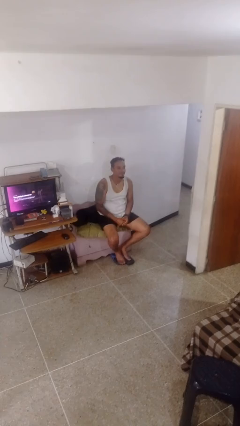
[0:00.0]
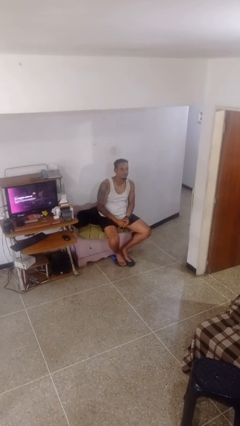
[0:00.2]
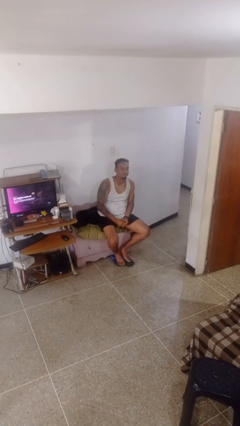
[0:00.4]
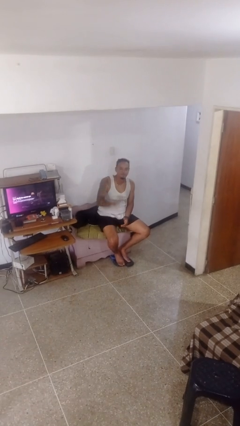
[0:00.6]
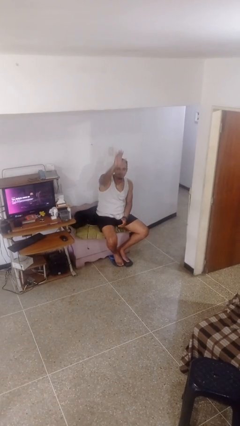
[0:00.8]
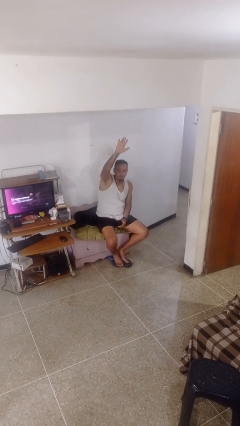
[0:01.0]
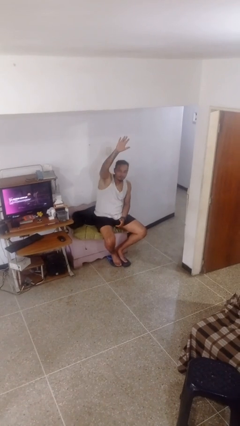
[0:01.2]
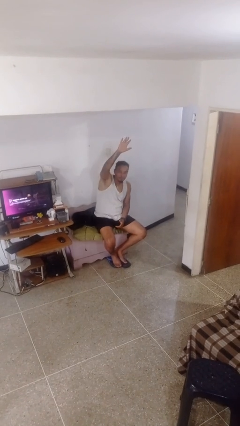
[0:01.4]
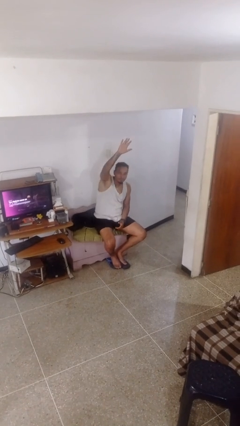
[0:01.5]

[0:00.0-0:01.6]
person gestures raise hand

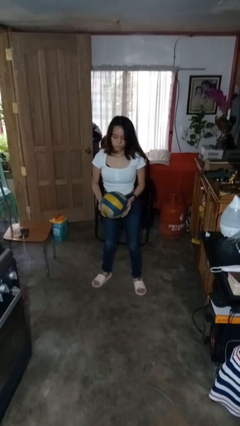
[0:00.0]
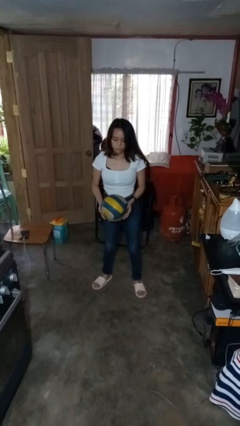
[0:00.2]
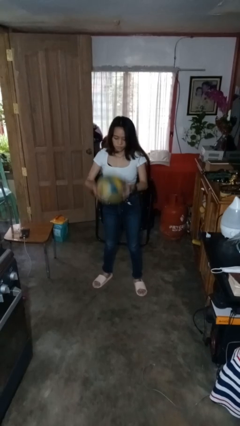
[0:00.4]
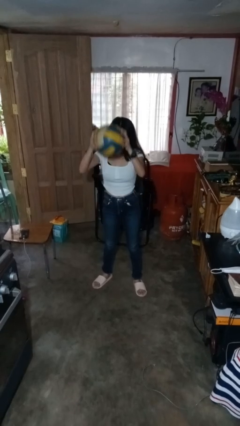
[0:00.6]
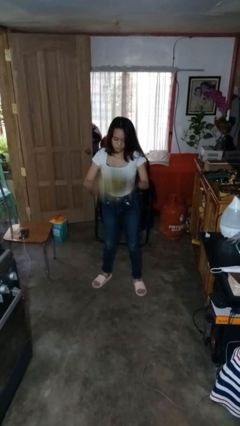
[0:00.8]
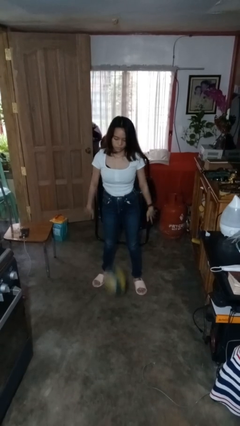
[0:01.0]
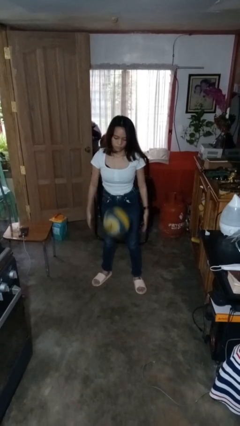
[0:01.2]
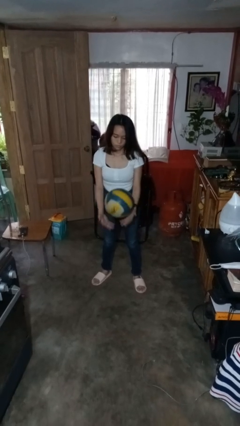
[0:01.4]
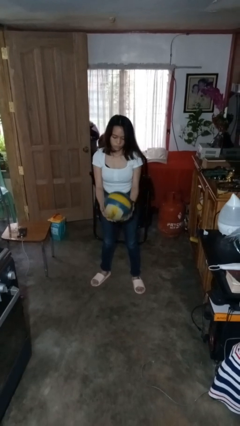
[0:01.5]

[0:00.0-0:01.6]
person bounces ball on floor

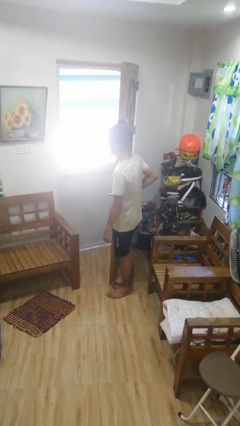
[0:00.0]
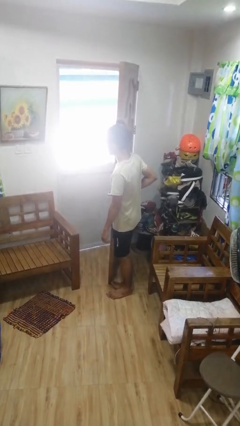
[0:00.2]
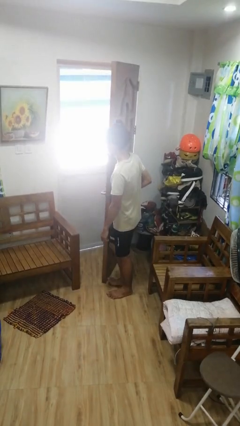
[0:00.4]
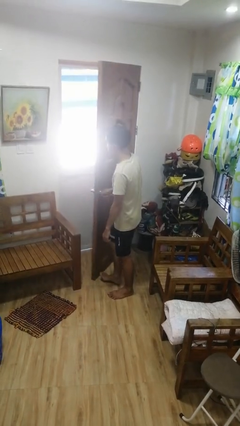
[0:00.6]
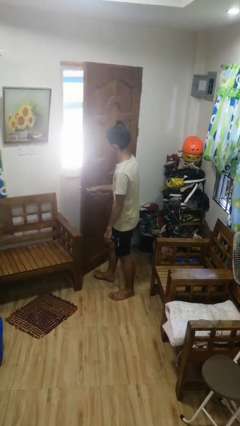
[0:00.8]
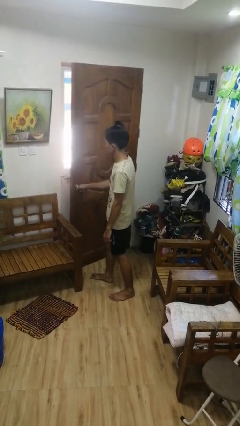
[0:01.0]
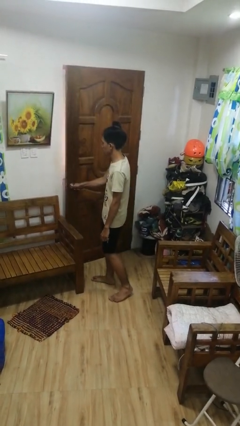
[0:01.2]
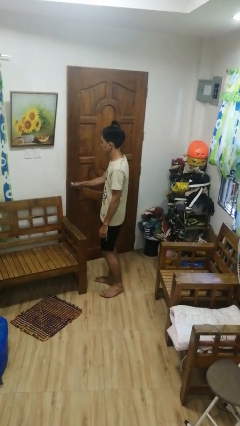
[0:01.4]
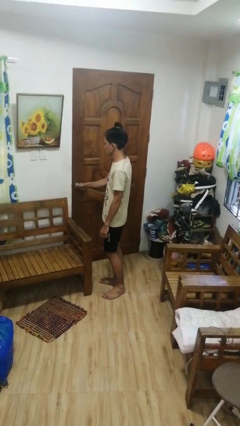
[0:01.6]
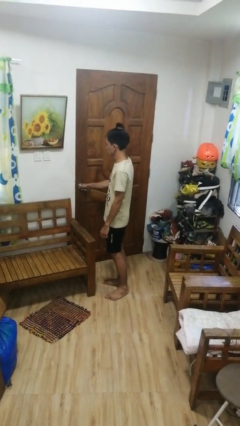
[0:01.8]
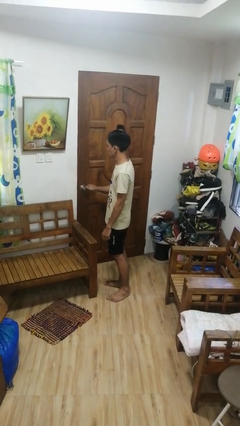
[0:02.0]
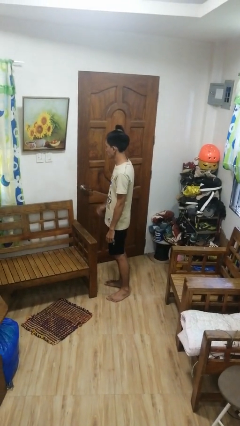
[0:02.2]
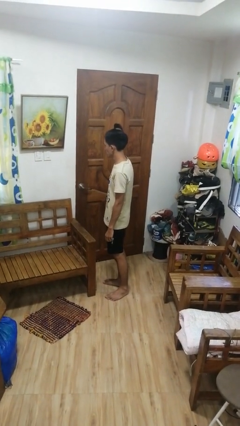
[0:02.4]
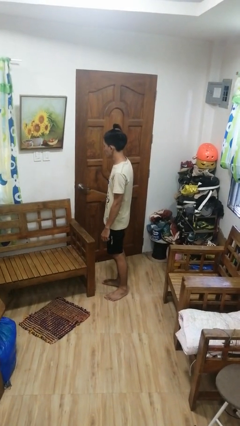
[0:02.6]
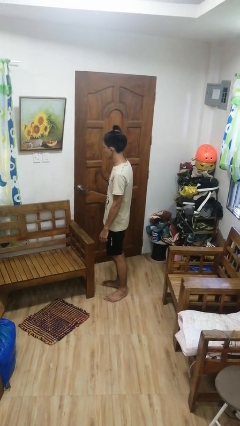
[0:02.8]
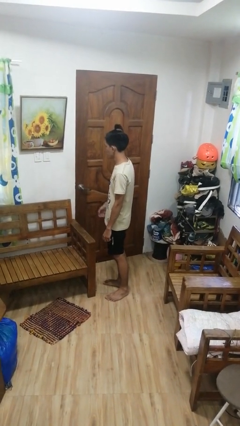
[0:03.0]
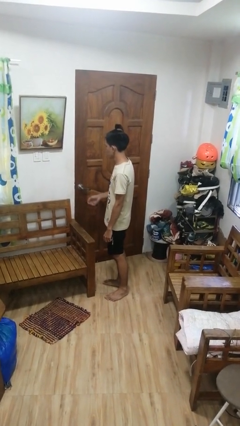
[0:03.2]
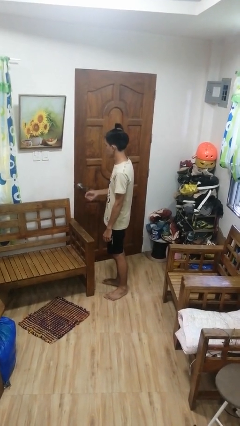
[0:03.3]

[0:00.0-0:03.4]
person closes facility door

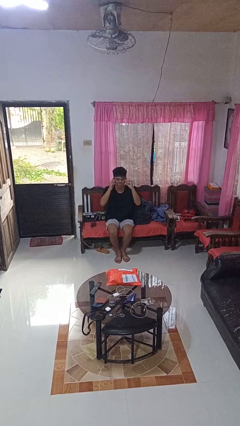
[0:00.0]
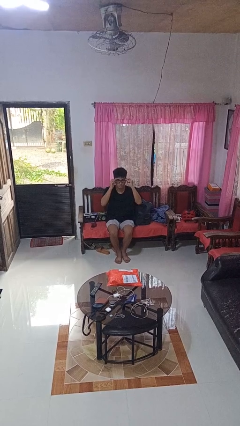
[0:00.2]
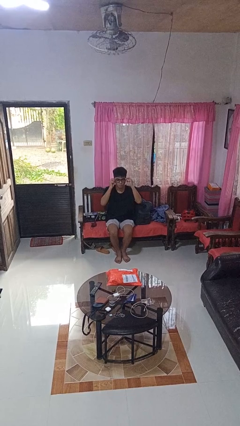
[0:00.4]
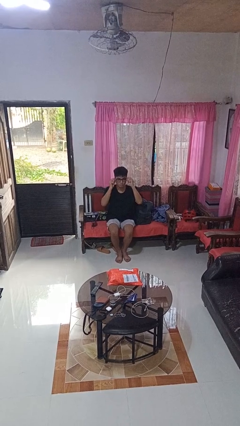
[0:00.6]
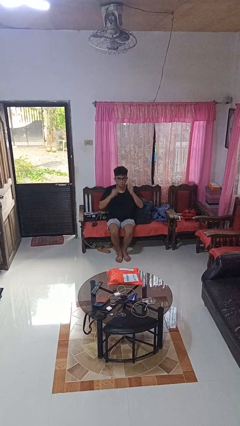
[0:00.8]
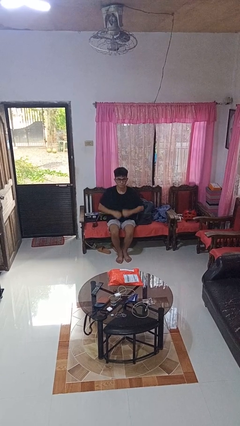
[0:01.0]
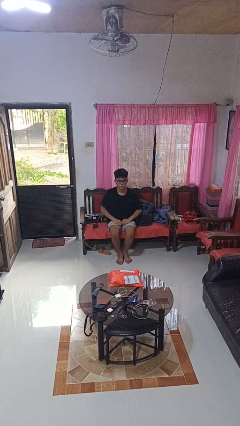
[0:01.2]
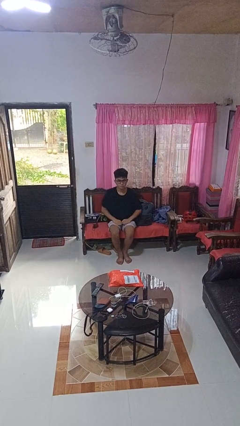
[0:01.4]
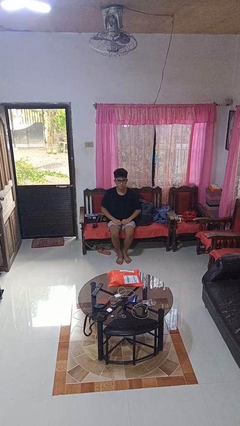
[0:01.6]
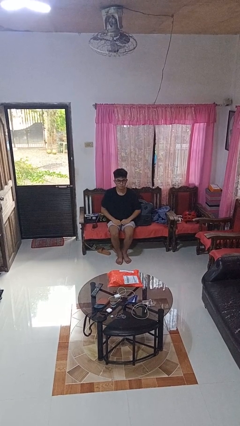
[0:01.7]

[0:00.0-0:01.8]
person puts on glasses

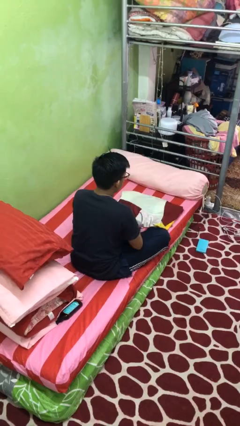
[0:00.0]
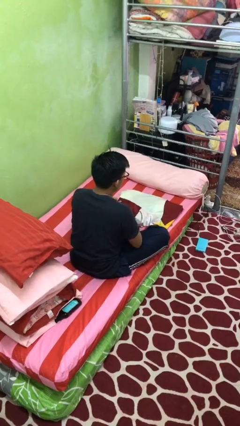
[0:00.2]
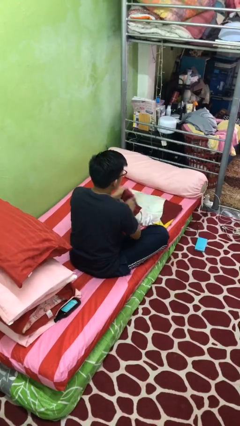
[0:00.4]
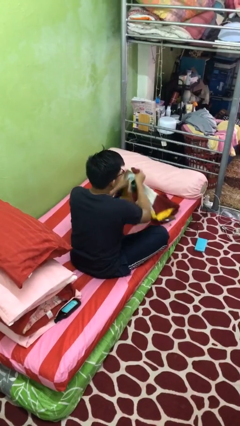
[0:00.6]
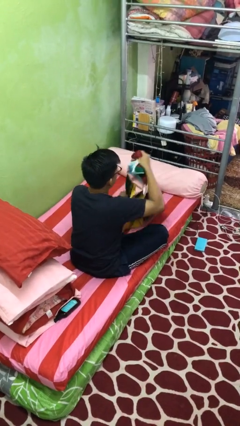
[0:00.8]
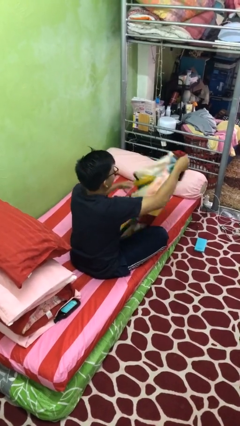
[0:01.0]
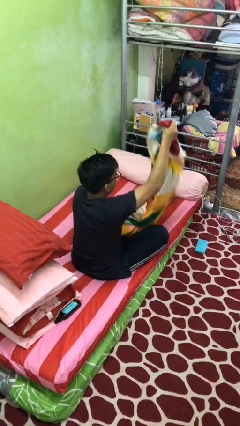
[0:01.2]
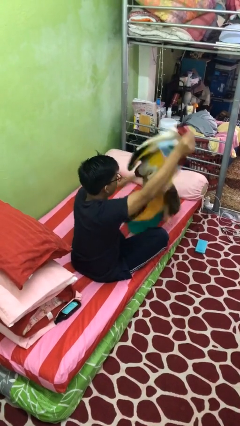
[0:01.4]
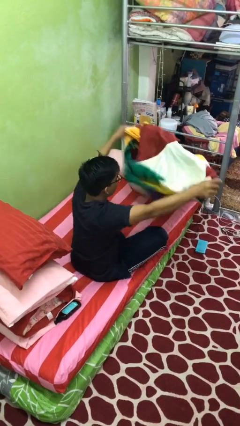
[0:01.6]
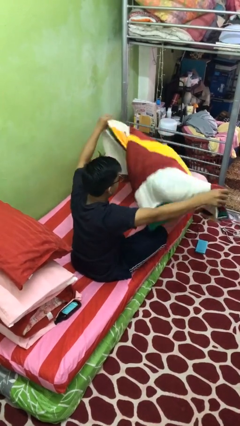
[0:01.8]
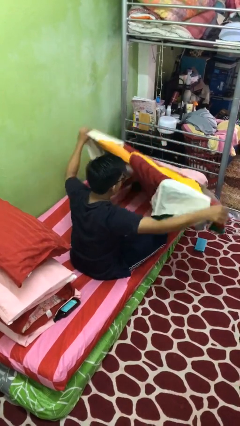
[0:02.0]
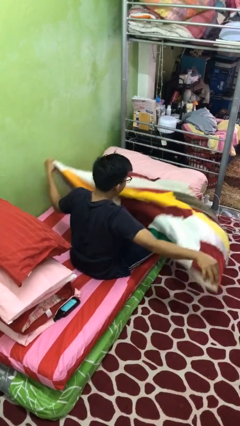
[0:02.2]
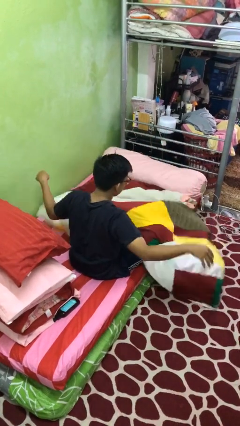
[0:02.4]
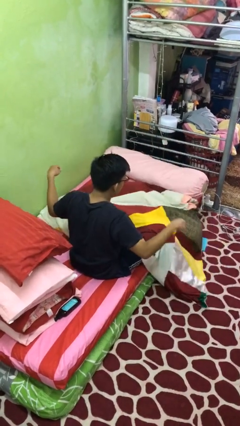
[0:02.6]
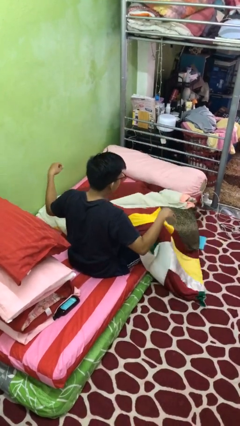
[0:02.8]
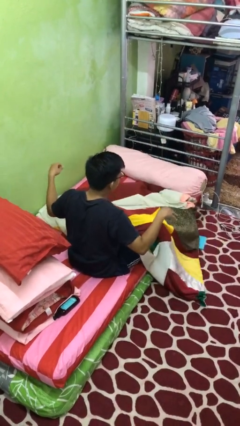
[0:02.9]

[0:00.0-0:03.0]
person unfolds blanket

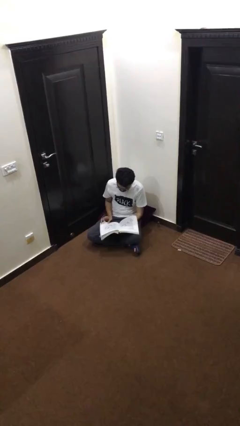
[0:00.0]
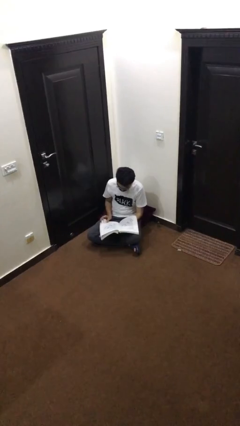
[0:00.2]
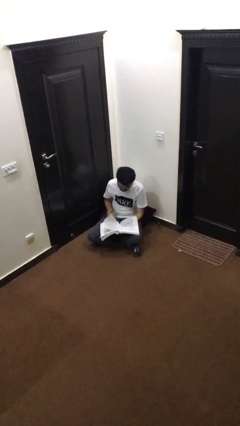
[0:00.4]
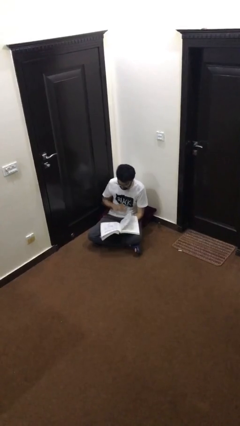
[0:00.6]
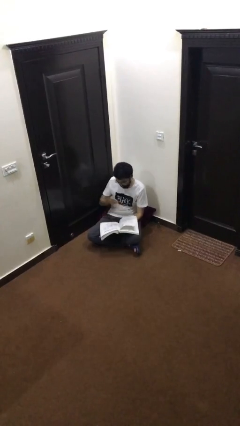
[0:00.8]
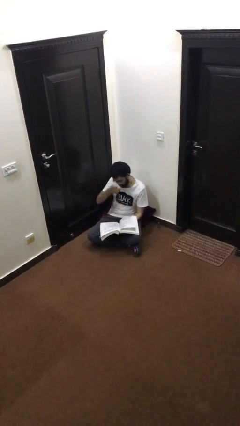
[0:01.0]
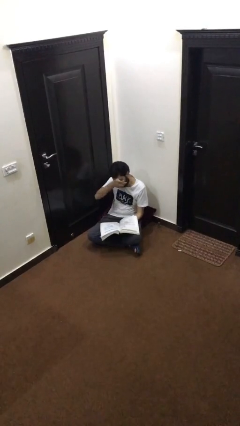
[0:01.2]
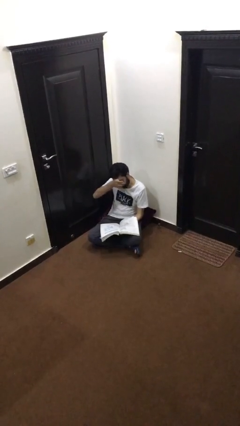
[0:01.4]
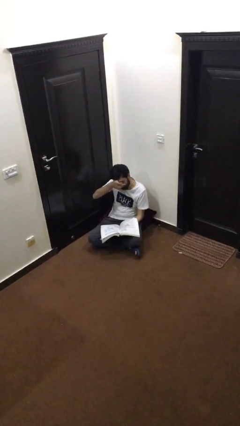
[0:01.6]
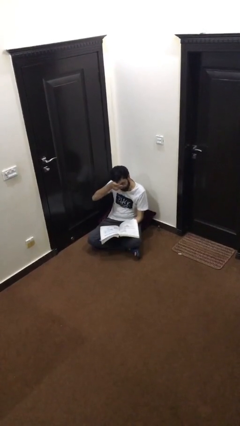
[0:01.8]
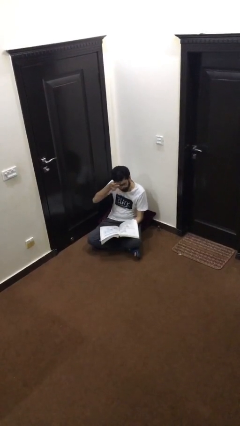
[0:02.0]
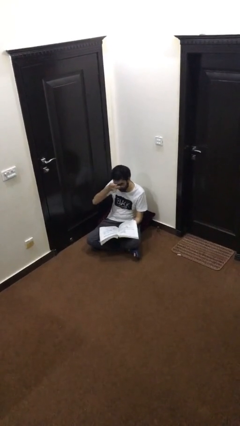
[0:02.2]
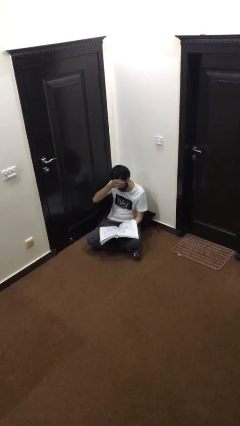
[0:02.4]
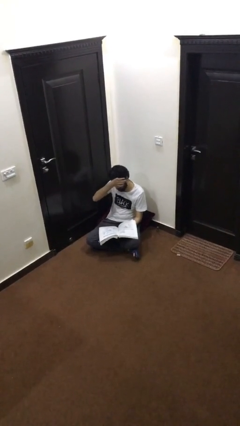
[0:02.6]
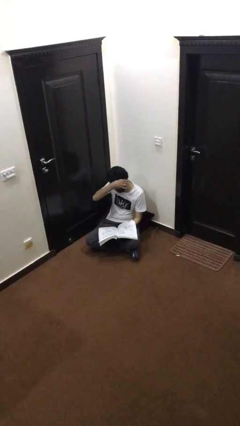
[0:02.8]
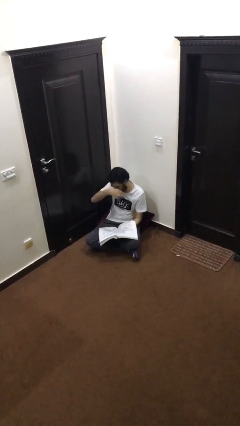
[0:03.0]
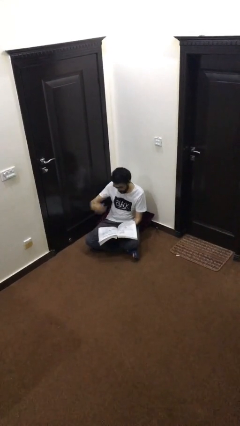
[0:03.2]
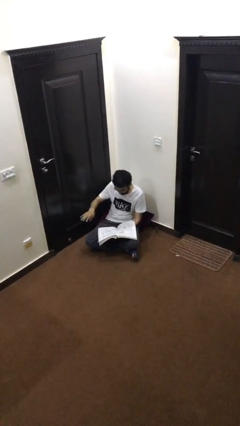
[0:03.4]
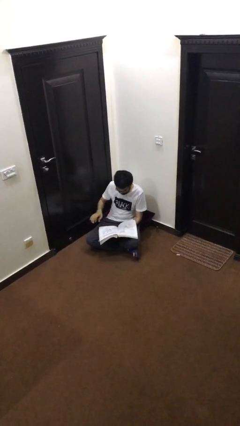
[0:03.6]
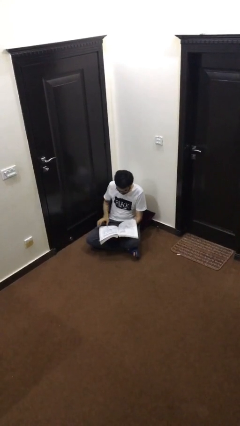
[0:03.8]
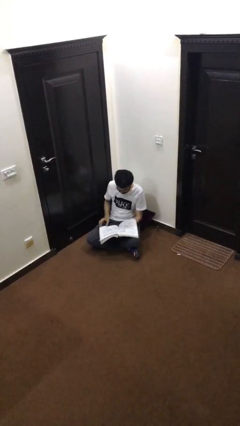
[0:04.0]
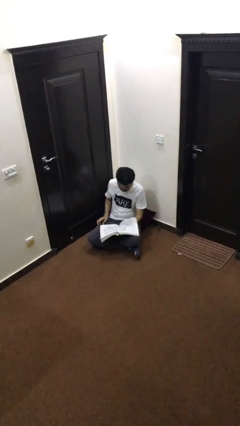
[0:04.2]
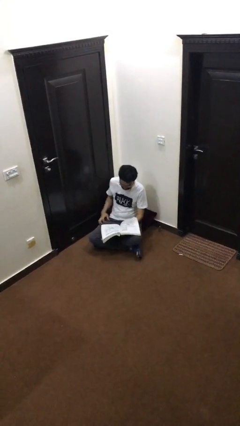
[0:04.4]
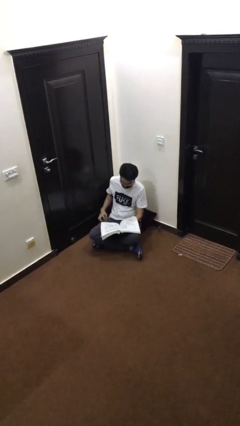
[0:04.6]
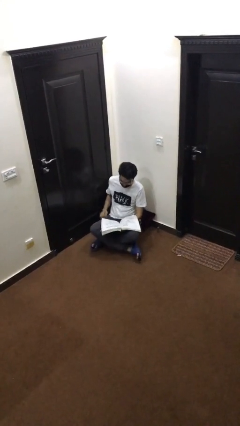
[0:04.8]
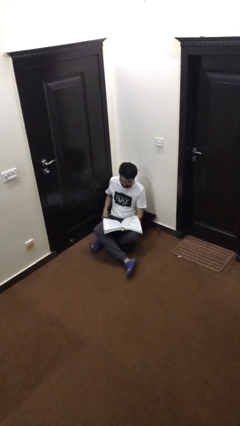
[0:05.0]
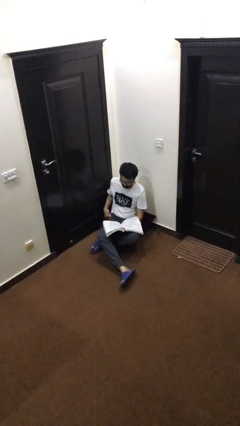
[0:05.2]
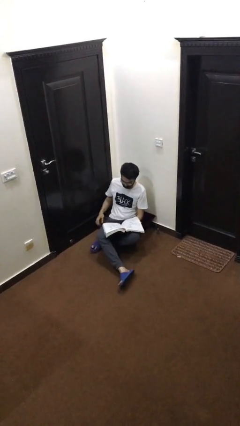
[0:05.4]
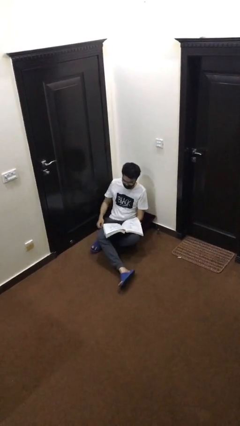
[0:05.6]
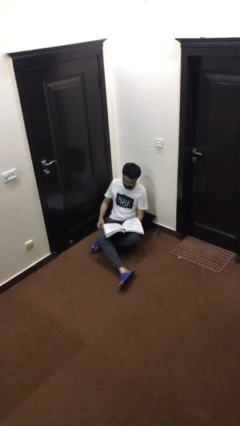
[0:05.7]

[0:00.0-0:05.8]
person reads document
